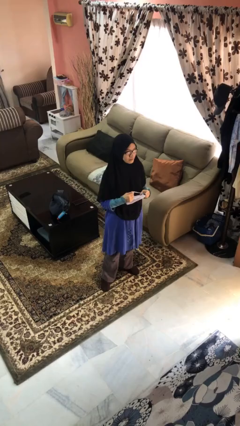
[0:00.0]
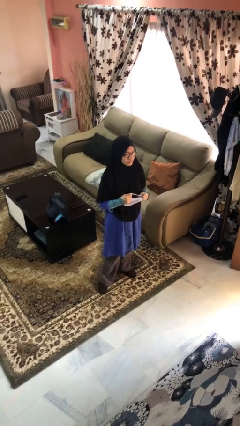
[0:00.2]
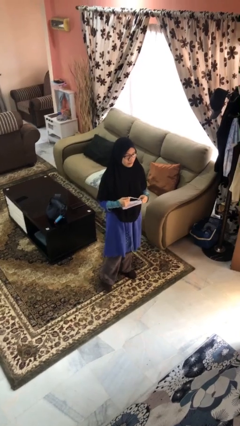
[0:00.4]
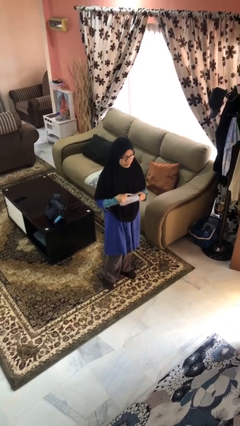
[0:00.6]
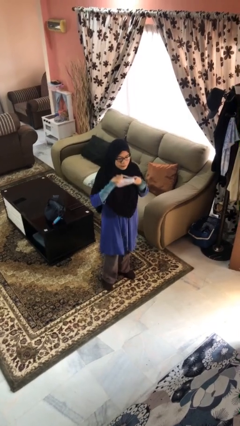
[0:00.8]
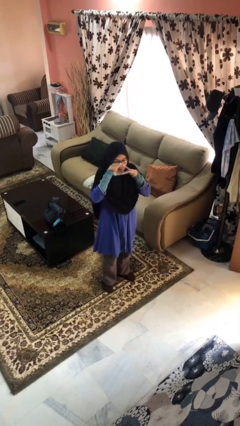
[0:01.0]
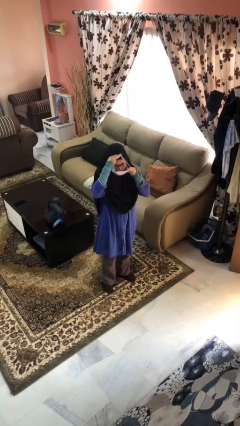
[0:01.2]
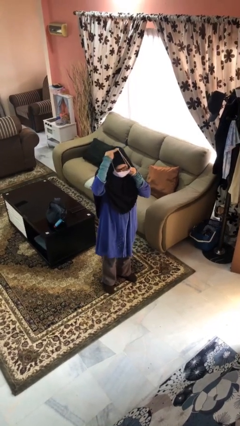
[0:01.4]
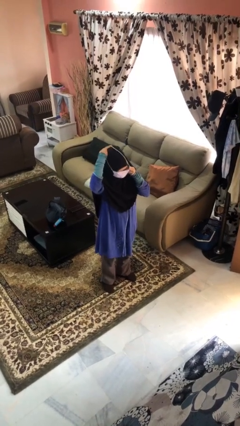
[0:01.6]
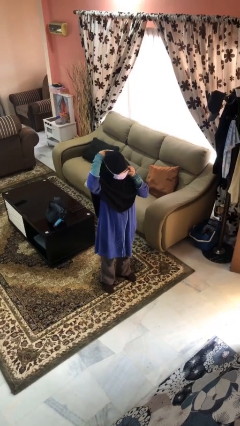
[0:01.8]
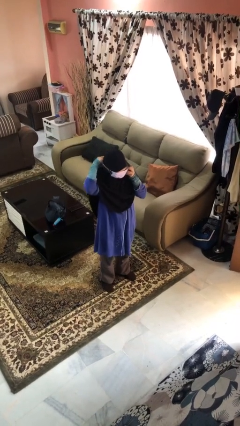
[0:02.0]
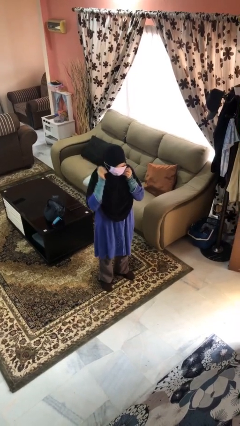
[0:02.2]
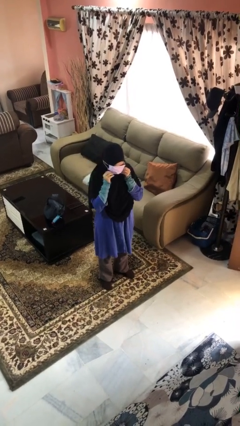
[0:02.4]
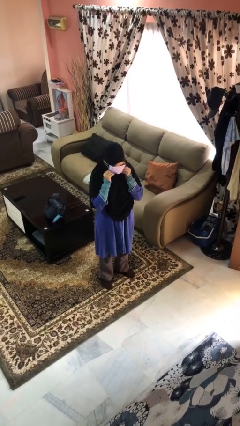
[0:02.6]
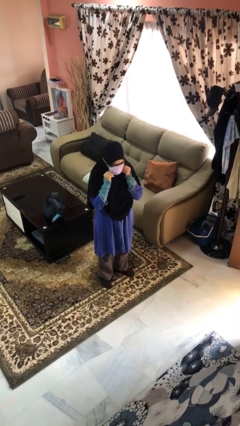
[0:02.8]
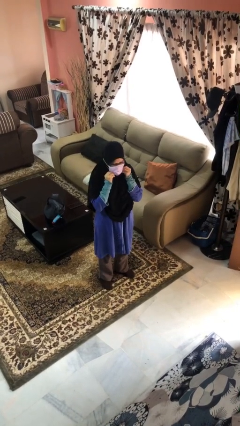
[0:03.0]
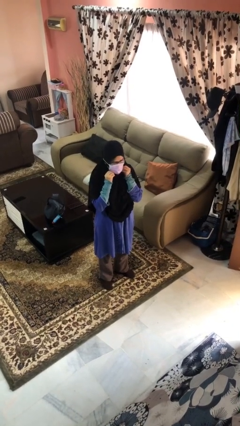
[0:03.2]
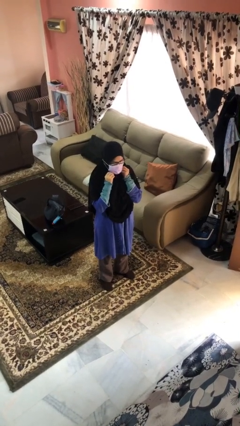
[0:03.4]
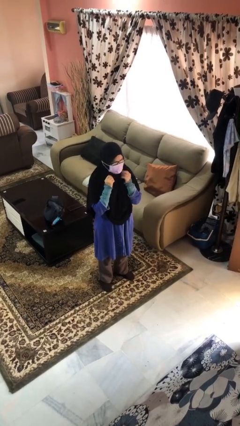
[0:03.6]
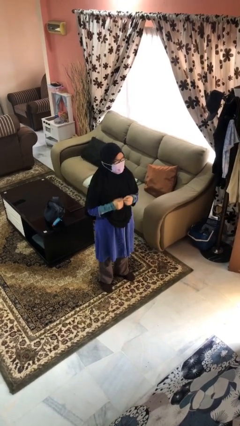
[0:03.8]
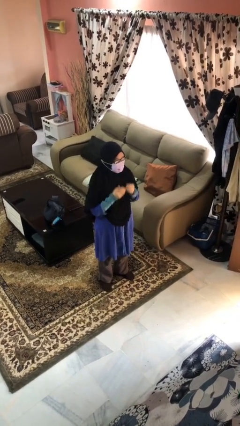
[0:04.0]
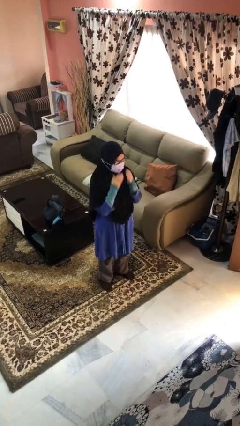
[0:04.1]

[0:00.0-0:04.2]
person puts on facemask

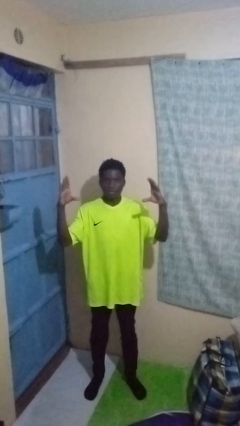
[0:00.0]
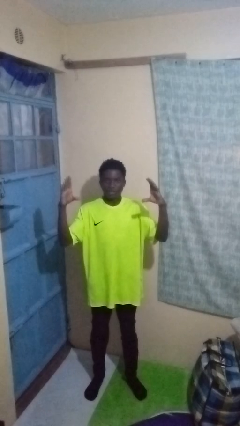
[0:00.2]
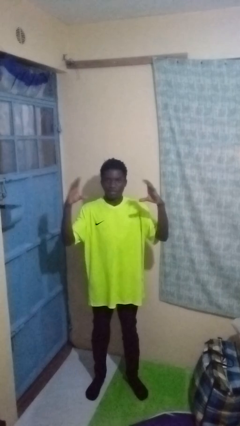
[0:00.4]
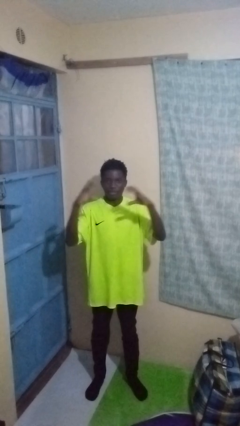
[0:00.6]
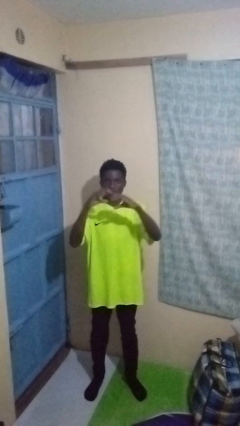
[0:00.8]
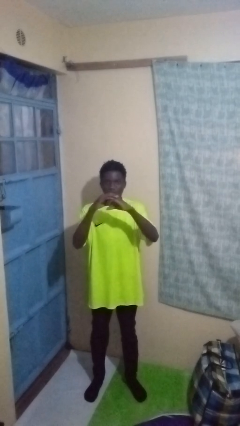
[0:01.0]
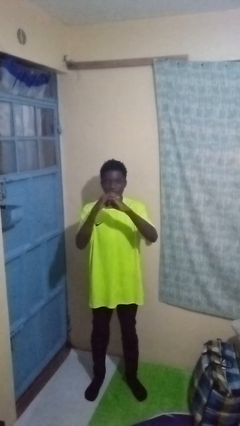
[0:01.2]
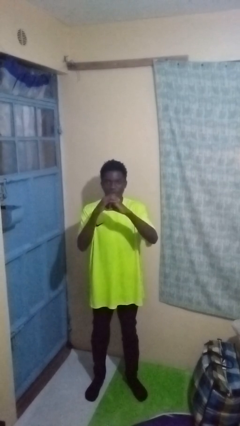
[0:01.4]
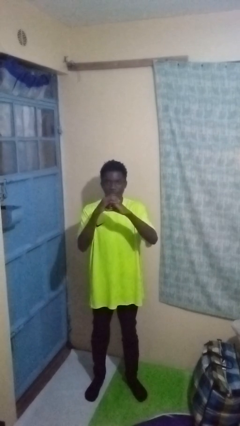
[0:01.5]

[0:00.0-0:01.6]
person gestures zoom out

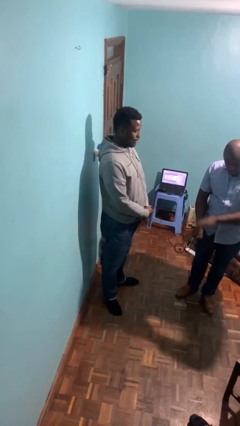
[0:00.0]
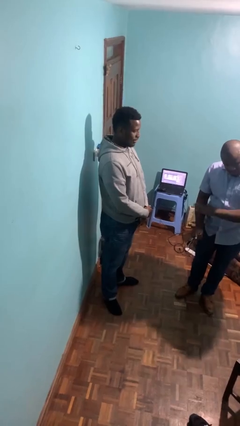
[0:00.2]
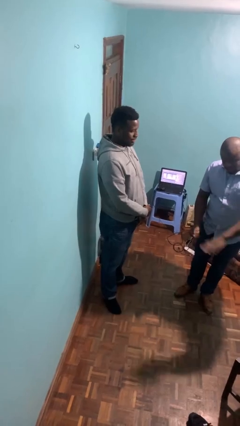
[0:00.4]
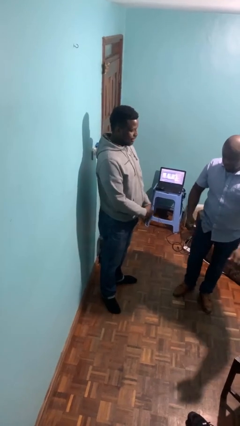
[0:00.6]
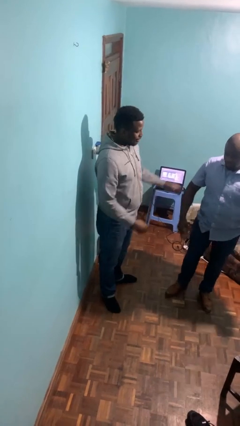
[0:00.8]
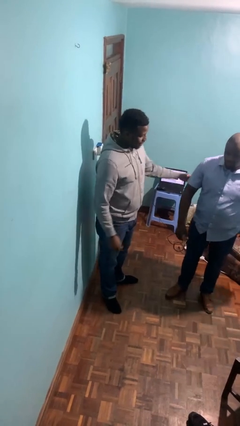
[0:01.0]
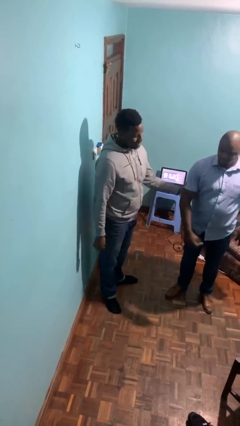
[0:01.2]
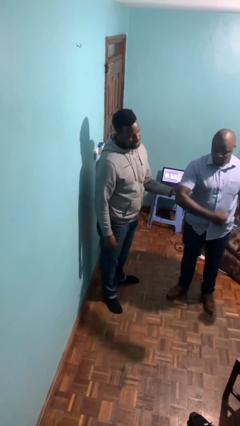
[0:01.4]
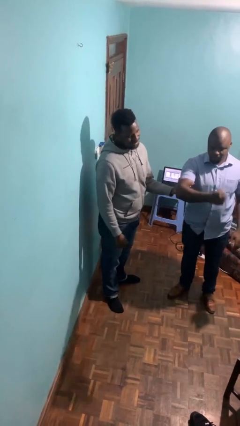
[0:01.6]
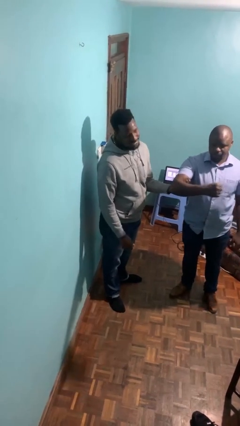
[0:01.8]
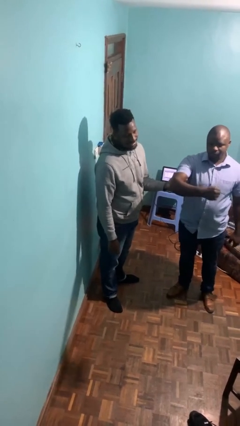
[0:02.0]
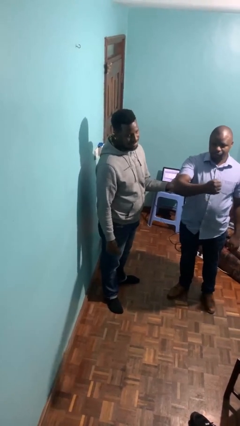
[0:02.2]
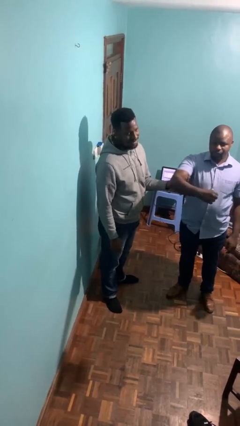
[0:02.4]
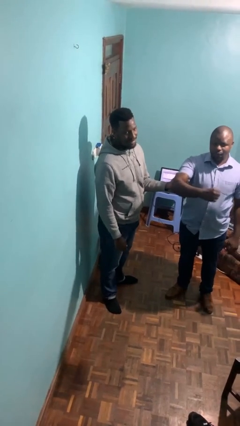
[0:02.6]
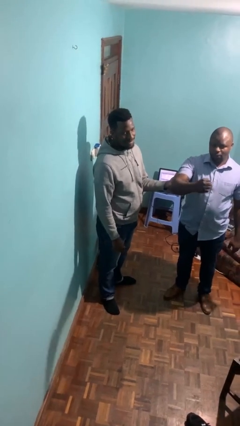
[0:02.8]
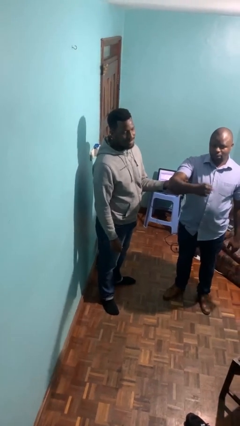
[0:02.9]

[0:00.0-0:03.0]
person grabs person by forearm

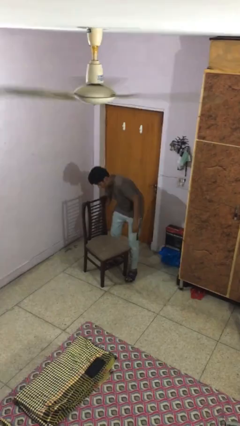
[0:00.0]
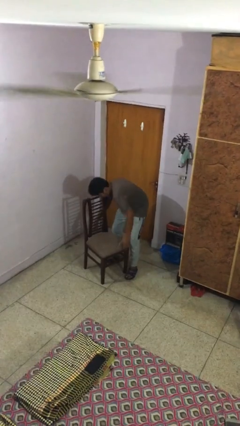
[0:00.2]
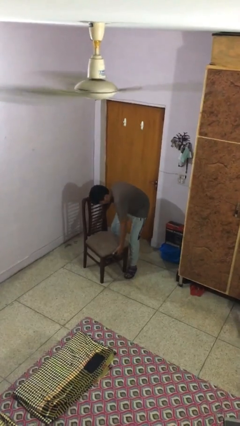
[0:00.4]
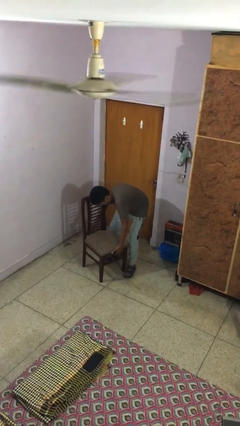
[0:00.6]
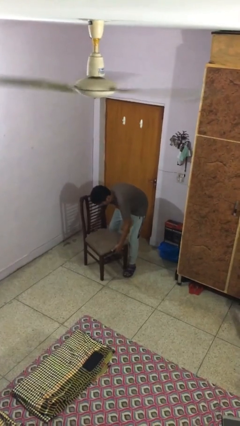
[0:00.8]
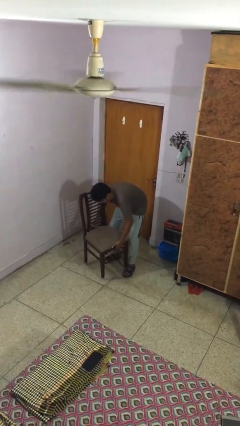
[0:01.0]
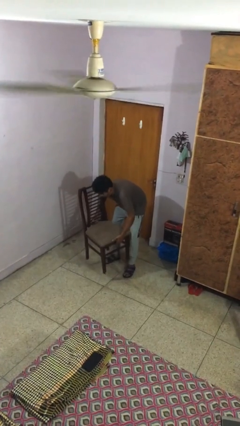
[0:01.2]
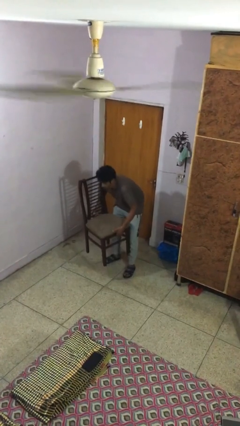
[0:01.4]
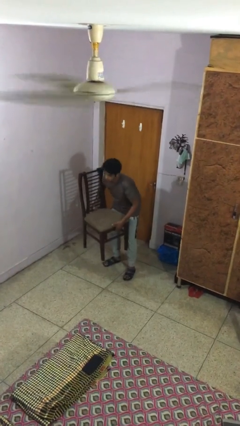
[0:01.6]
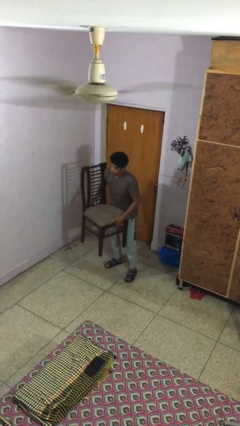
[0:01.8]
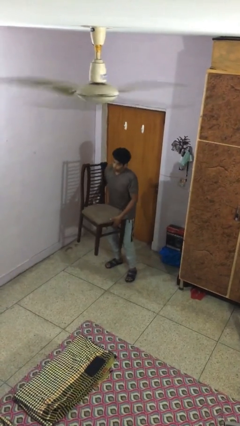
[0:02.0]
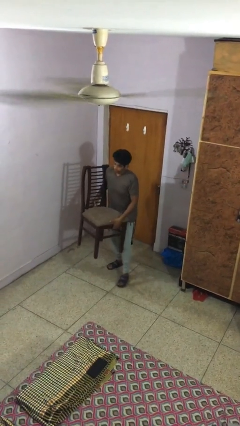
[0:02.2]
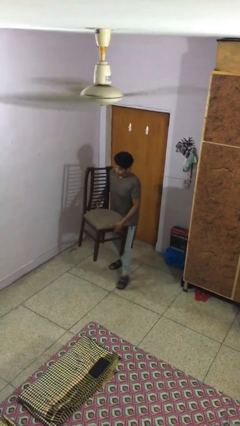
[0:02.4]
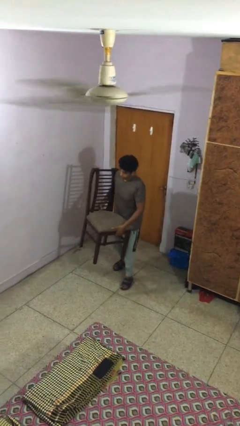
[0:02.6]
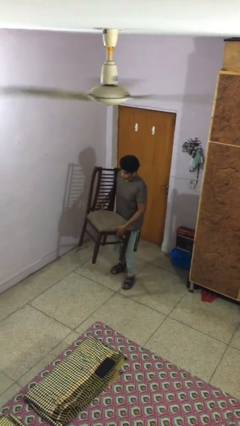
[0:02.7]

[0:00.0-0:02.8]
person picks up object from floor

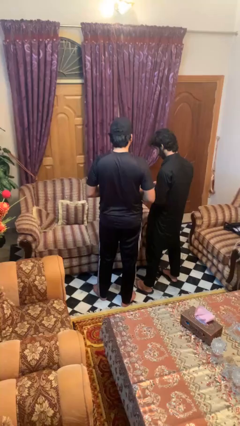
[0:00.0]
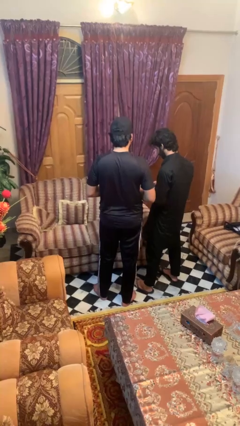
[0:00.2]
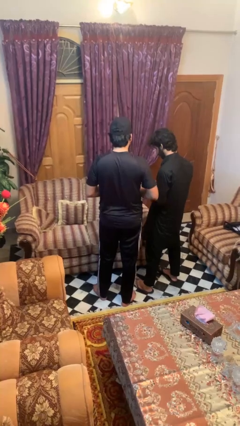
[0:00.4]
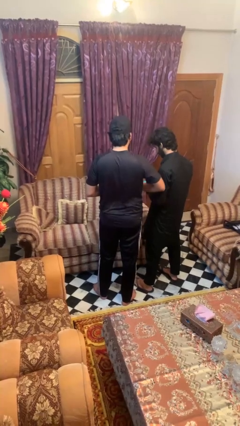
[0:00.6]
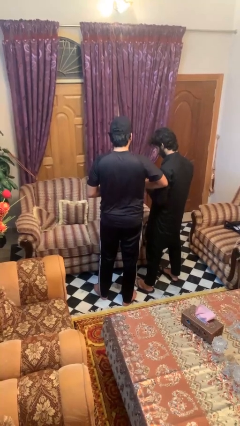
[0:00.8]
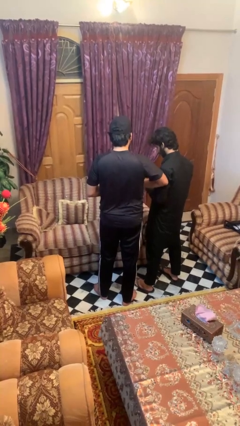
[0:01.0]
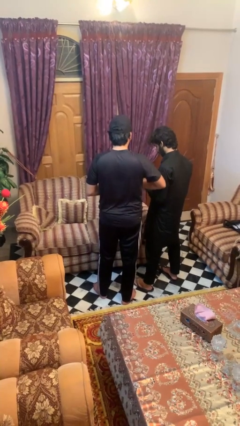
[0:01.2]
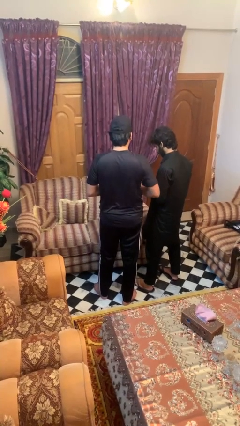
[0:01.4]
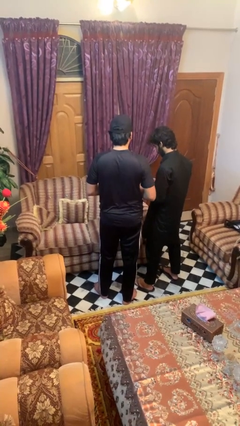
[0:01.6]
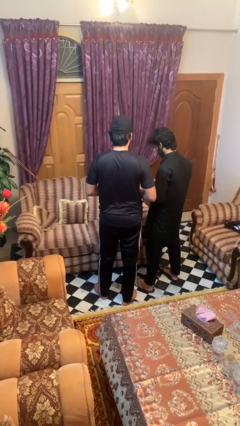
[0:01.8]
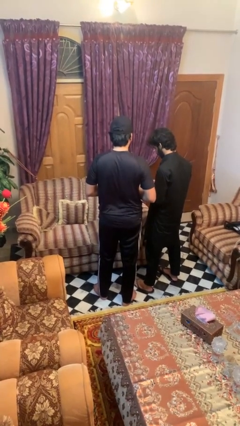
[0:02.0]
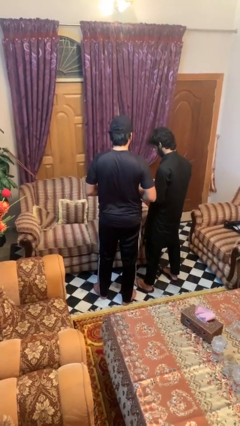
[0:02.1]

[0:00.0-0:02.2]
person nudges person with elbow

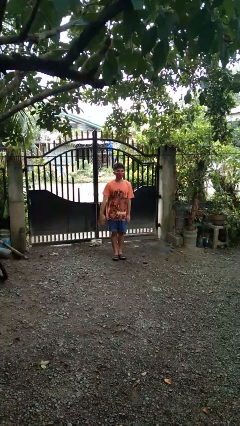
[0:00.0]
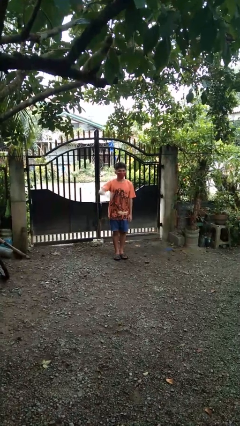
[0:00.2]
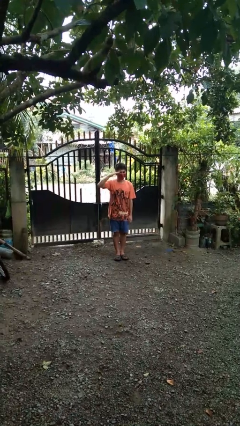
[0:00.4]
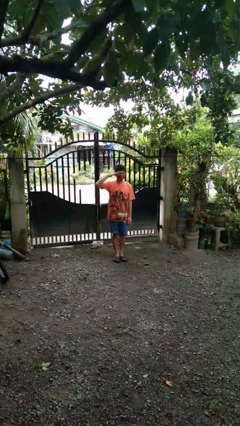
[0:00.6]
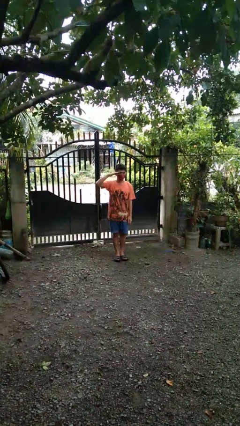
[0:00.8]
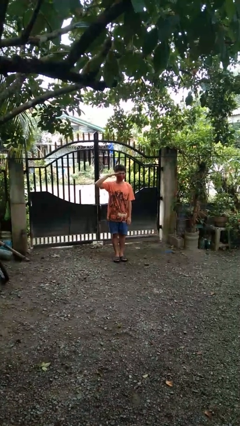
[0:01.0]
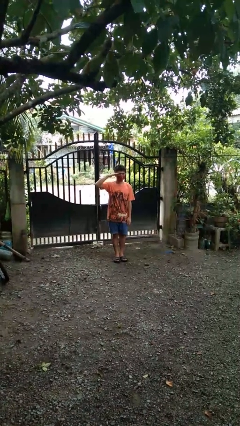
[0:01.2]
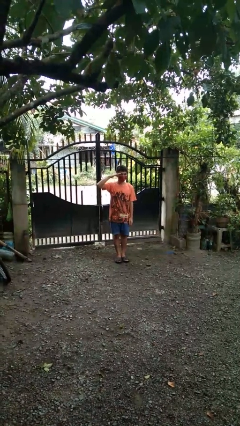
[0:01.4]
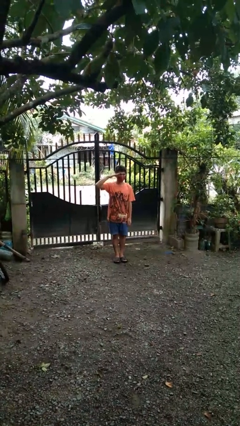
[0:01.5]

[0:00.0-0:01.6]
person salutes

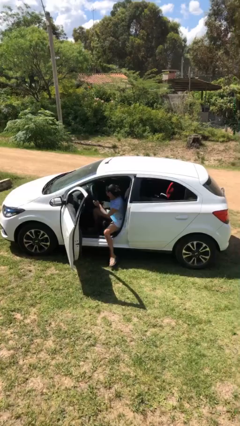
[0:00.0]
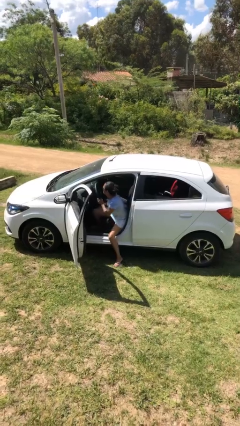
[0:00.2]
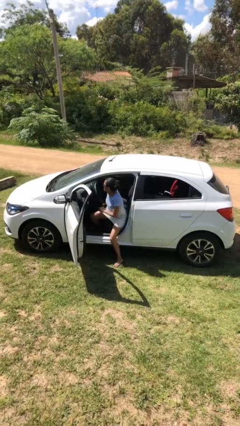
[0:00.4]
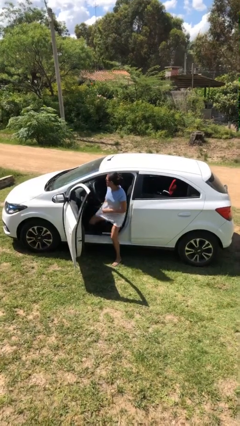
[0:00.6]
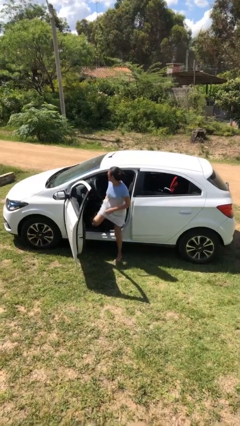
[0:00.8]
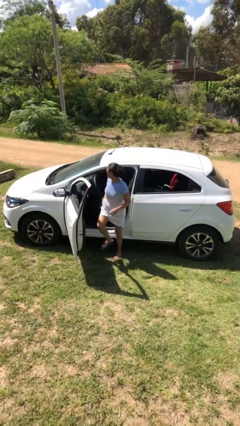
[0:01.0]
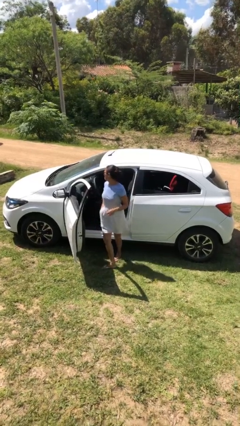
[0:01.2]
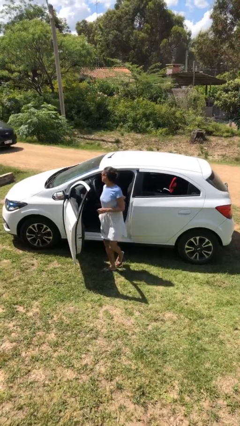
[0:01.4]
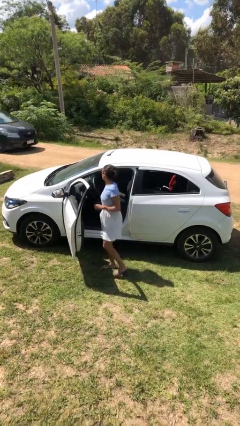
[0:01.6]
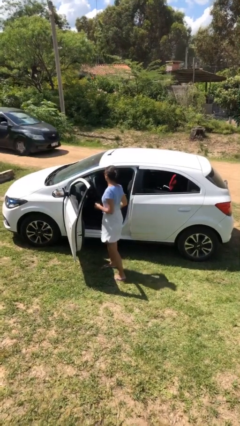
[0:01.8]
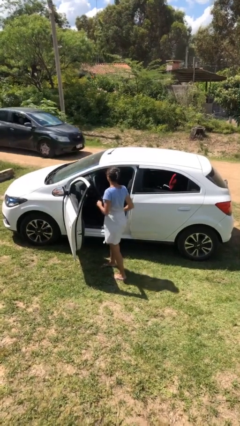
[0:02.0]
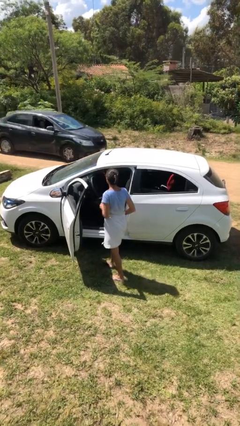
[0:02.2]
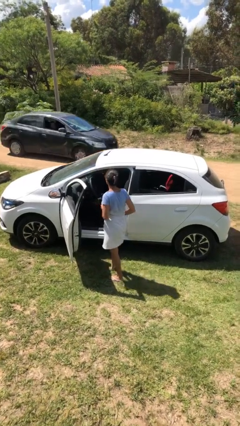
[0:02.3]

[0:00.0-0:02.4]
person exits car
